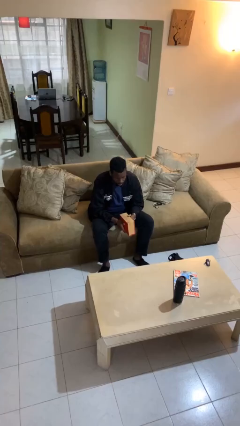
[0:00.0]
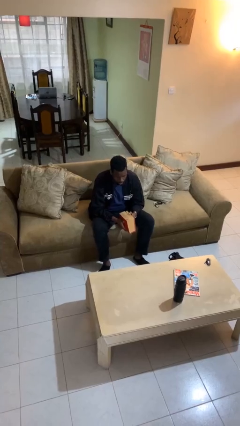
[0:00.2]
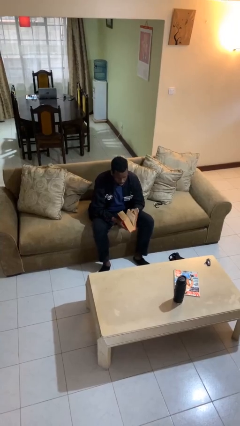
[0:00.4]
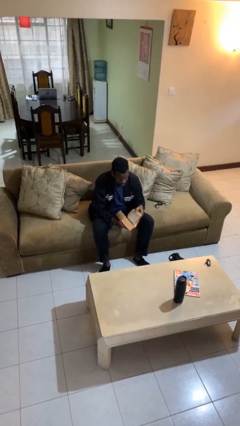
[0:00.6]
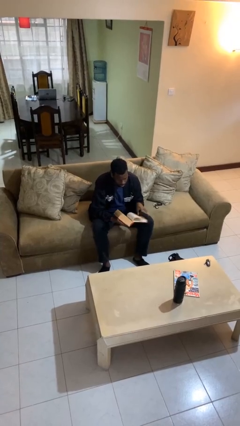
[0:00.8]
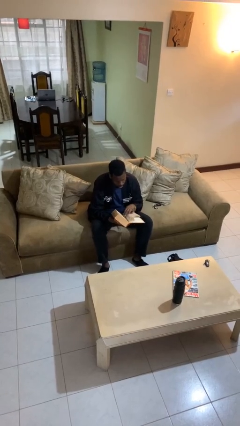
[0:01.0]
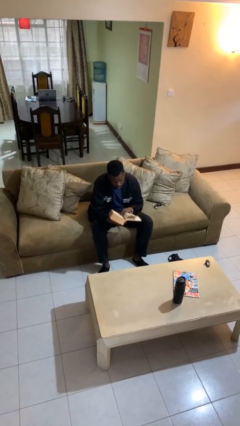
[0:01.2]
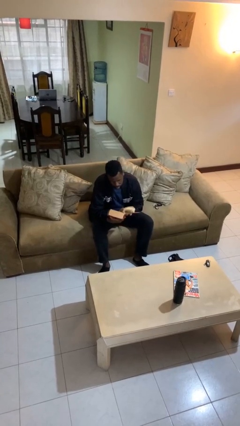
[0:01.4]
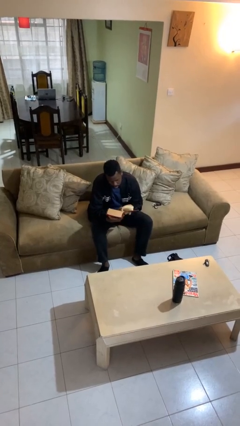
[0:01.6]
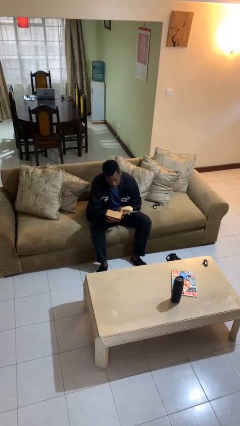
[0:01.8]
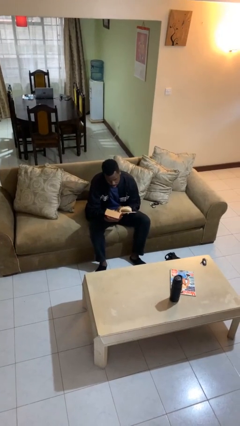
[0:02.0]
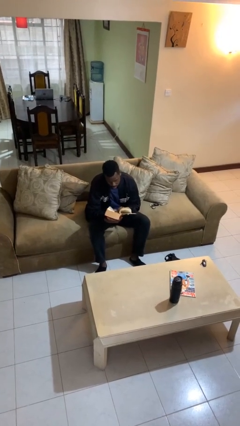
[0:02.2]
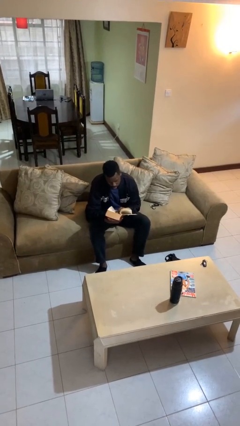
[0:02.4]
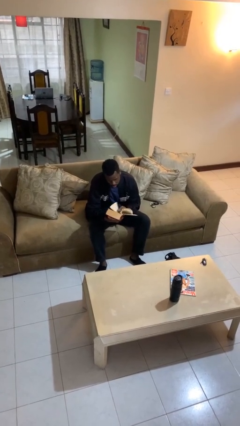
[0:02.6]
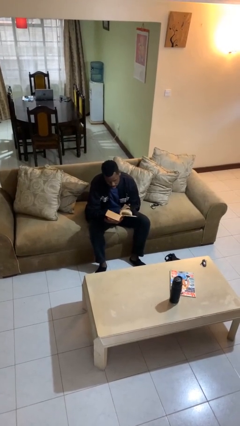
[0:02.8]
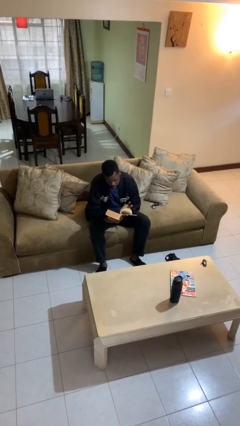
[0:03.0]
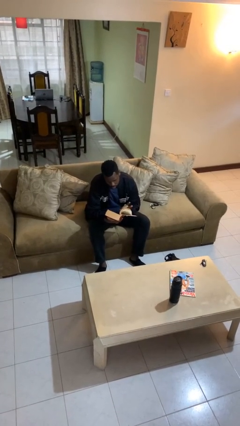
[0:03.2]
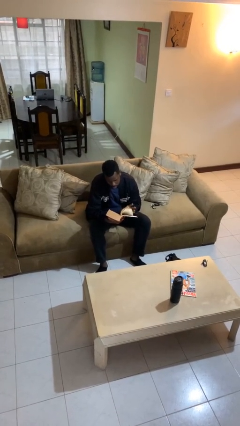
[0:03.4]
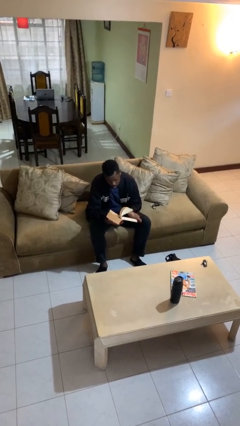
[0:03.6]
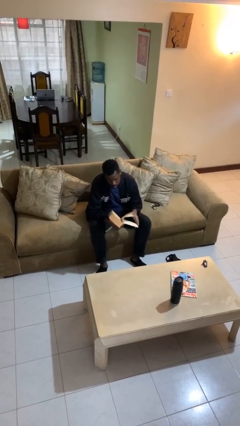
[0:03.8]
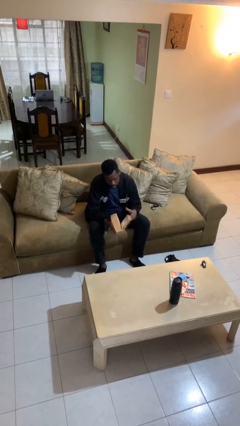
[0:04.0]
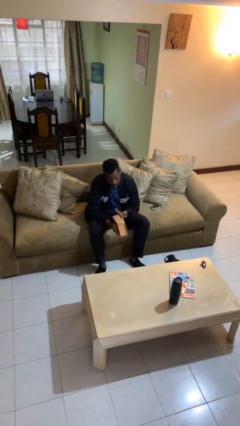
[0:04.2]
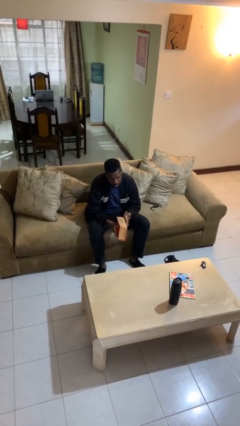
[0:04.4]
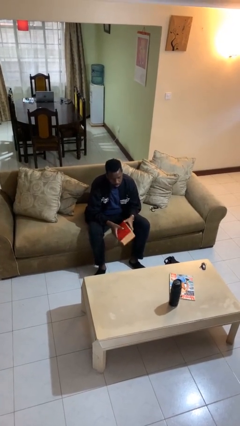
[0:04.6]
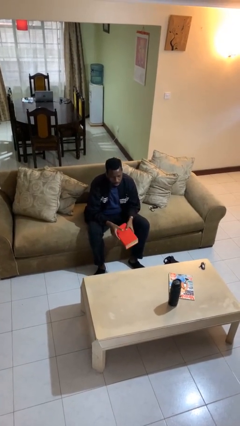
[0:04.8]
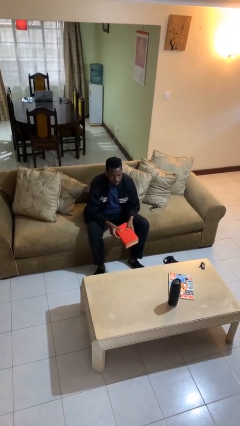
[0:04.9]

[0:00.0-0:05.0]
person reads book

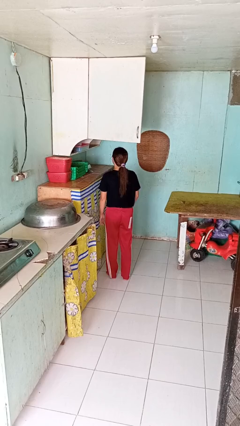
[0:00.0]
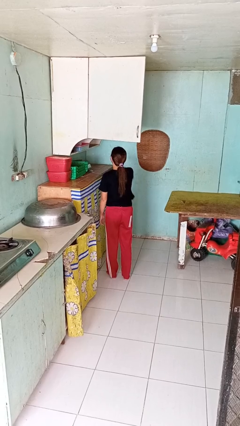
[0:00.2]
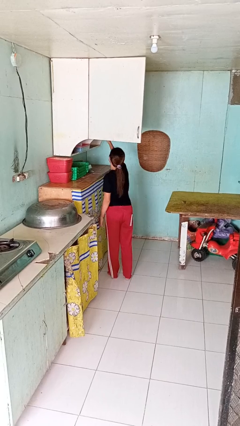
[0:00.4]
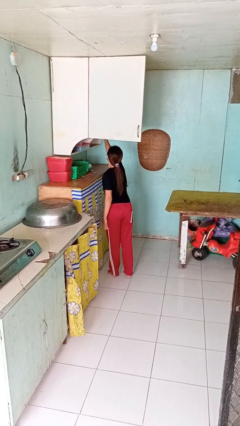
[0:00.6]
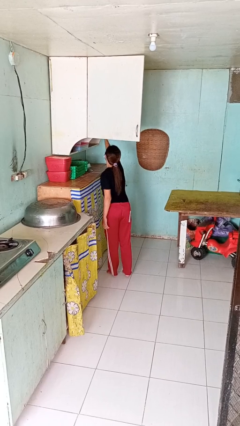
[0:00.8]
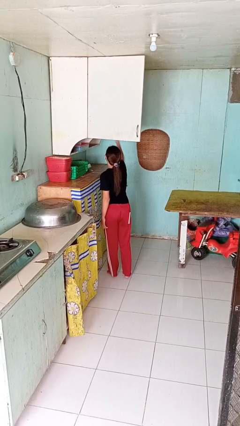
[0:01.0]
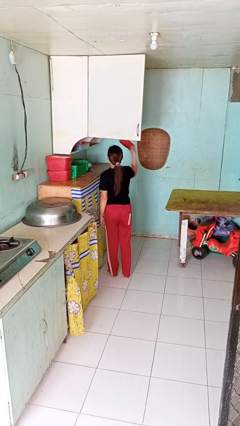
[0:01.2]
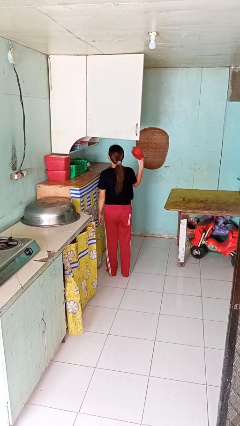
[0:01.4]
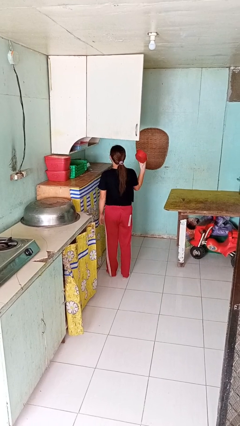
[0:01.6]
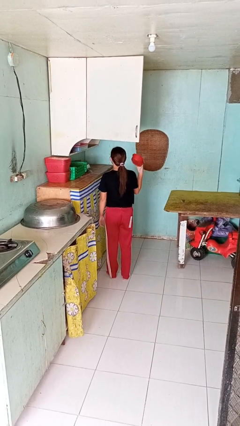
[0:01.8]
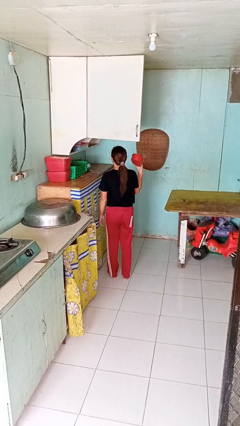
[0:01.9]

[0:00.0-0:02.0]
person takes object from cabinet

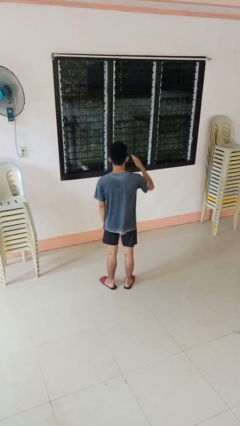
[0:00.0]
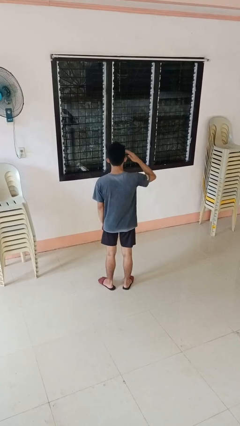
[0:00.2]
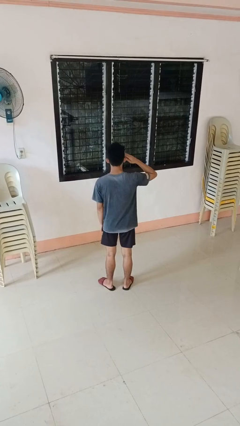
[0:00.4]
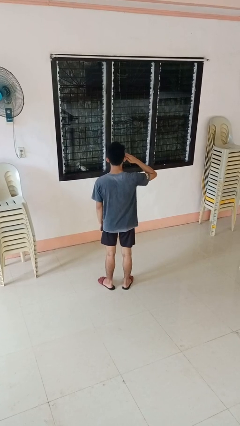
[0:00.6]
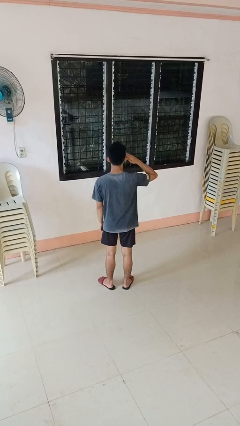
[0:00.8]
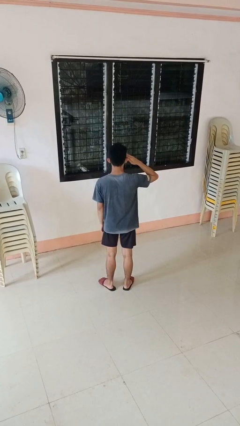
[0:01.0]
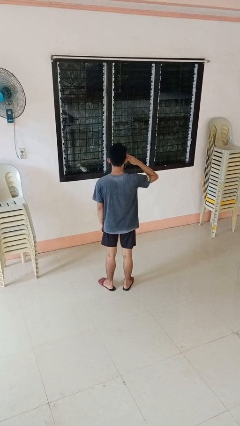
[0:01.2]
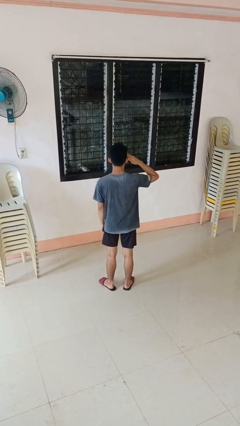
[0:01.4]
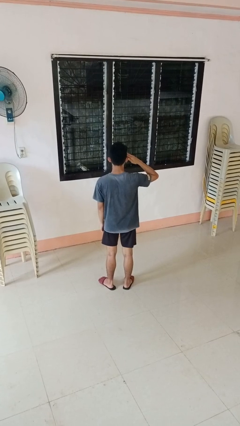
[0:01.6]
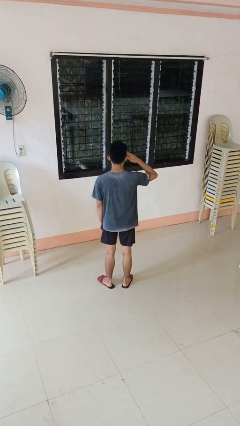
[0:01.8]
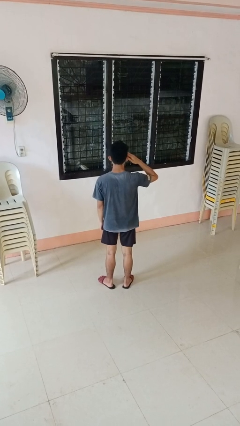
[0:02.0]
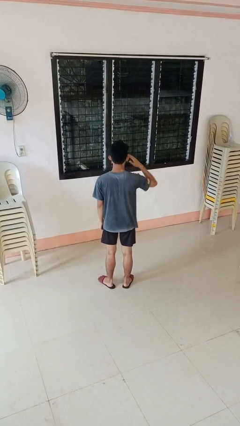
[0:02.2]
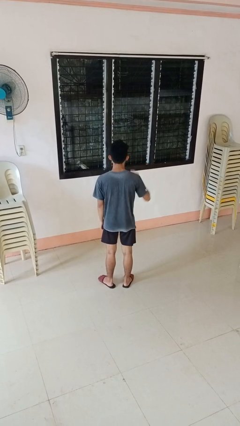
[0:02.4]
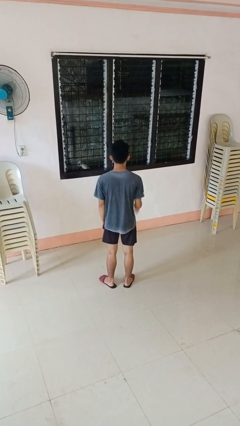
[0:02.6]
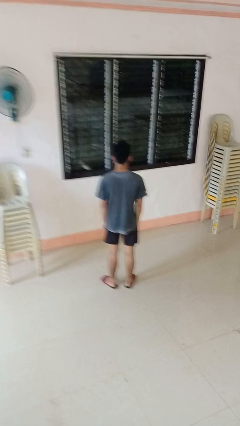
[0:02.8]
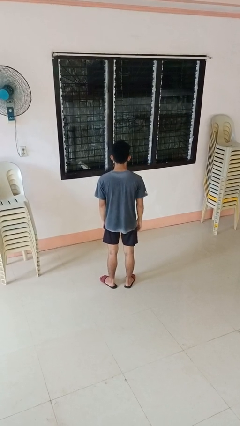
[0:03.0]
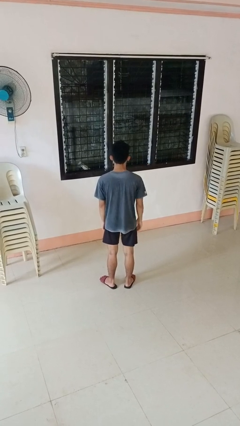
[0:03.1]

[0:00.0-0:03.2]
person salutes

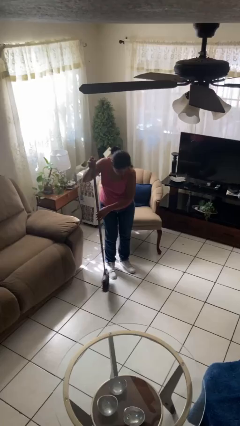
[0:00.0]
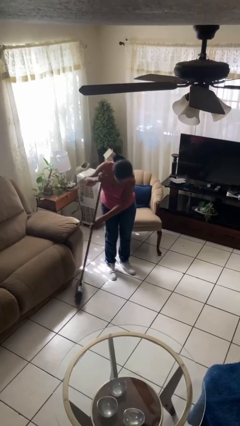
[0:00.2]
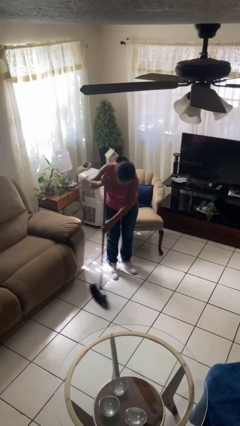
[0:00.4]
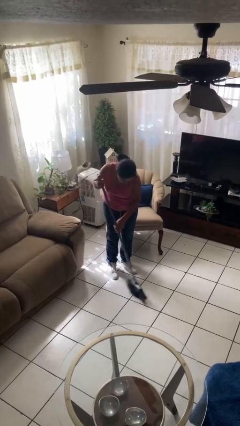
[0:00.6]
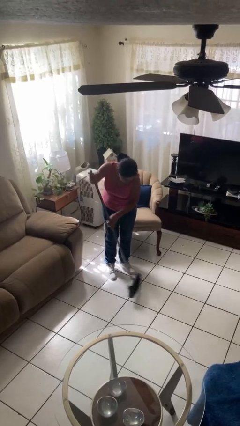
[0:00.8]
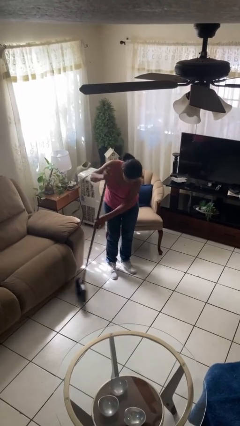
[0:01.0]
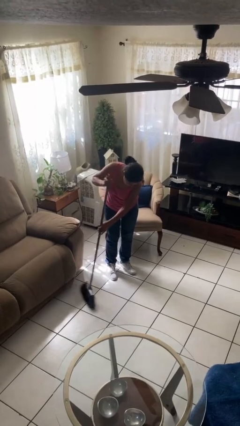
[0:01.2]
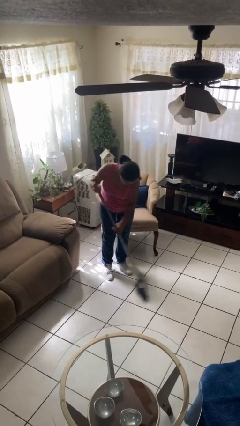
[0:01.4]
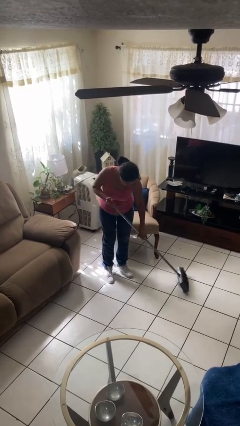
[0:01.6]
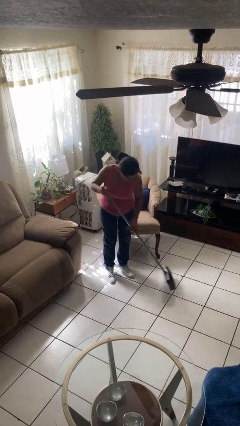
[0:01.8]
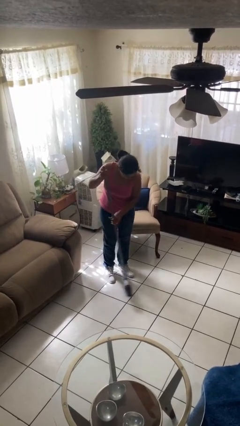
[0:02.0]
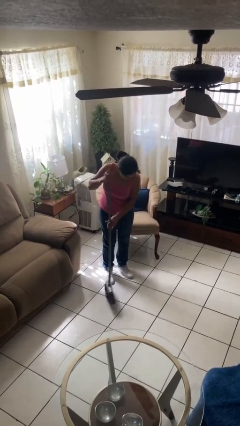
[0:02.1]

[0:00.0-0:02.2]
person sweeps floor

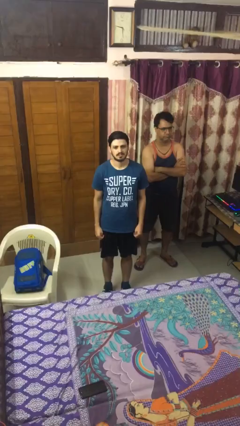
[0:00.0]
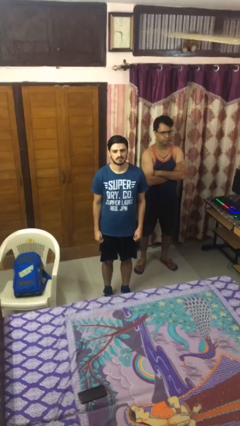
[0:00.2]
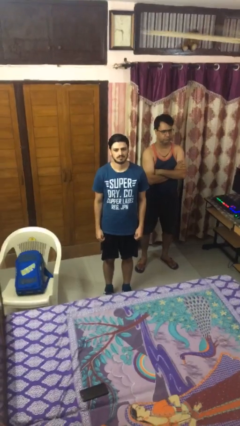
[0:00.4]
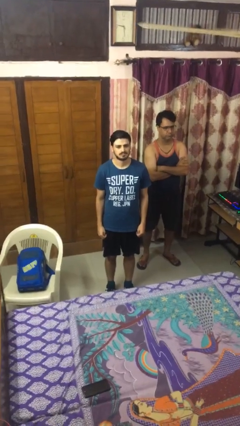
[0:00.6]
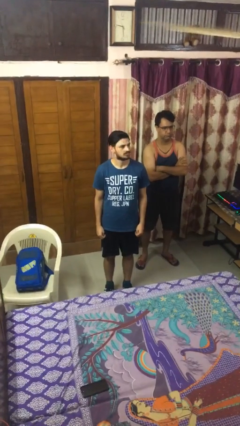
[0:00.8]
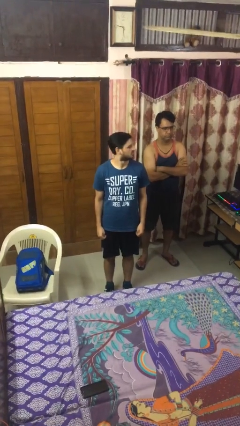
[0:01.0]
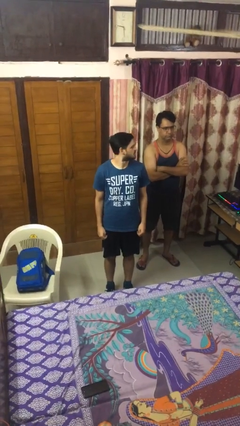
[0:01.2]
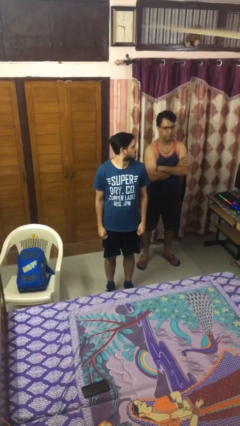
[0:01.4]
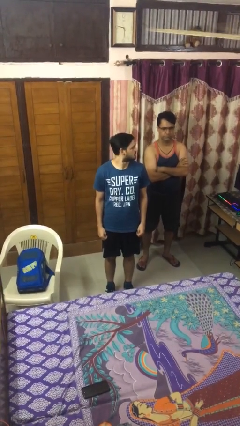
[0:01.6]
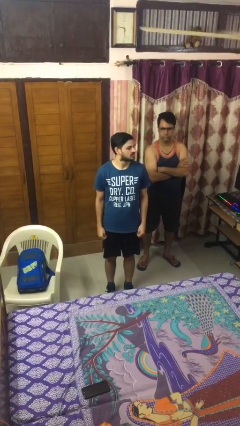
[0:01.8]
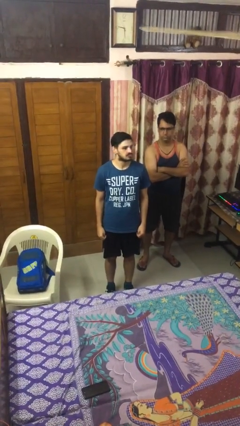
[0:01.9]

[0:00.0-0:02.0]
person looks over shoulder

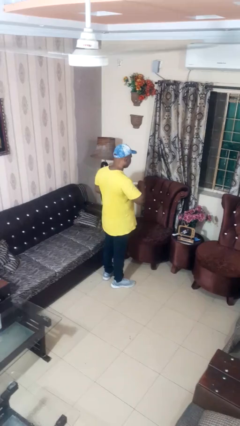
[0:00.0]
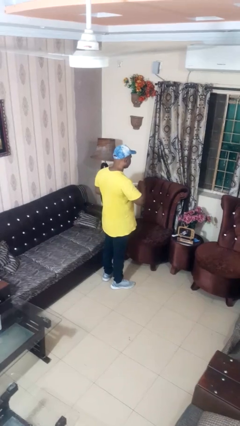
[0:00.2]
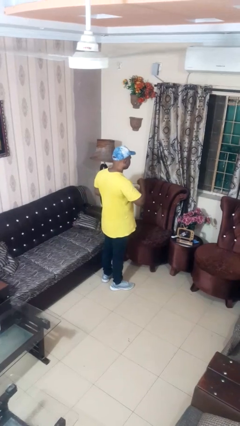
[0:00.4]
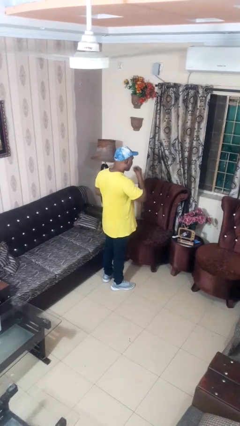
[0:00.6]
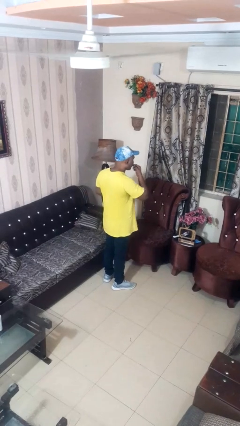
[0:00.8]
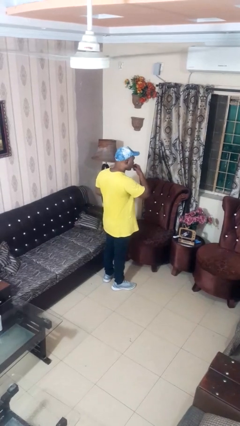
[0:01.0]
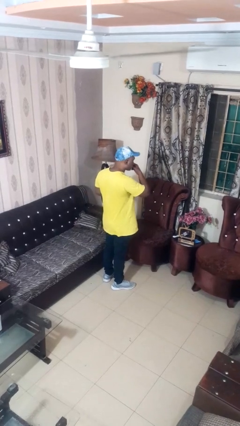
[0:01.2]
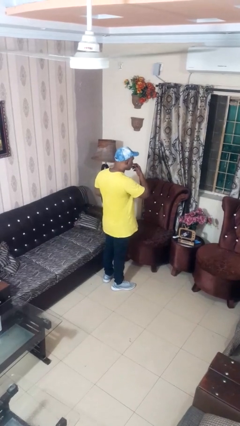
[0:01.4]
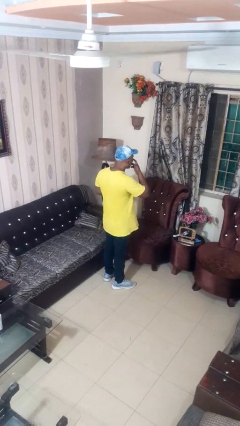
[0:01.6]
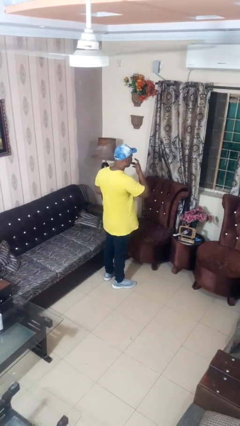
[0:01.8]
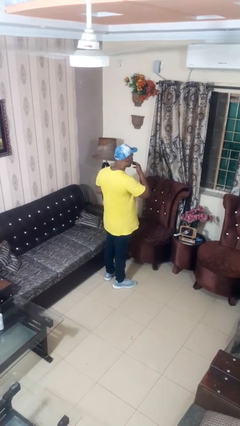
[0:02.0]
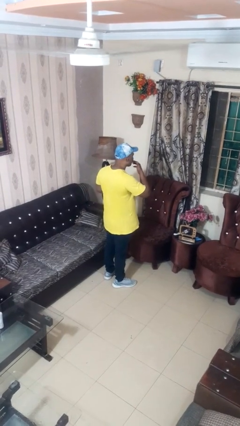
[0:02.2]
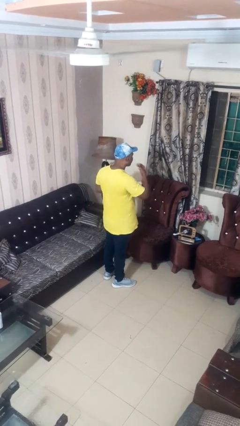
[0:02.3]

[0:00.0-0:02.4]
person licks fingers

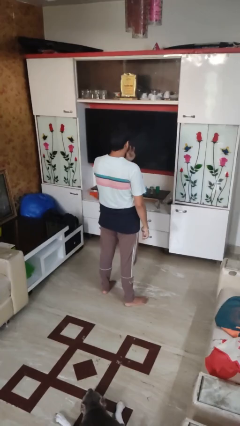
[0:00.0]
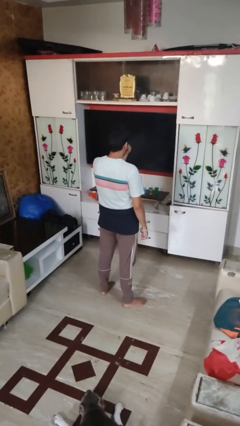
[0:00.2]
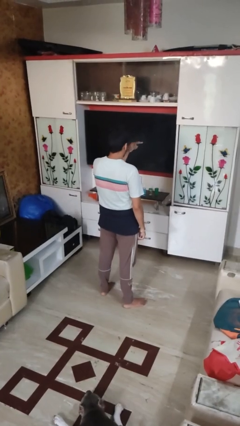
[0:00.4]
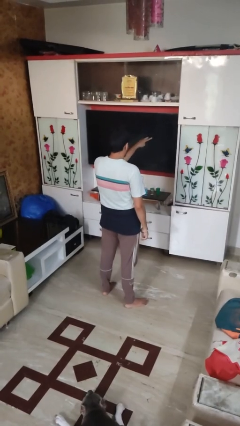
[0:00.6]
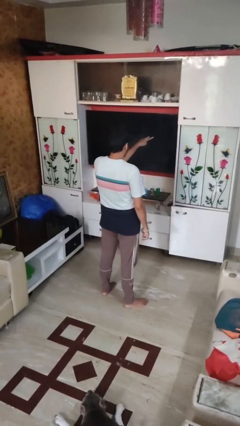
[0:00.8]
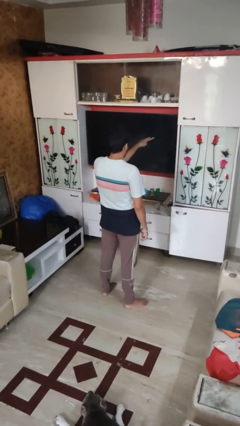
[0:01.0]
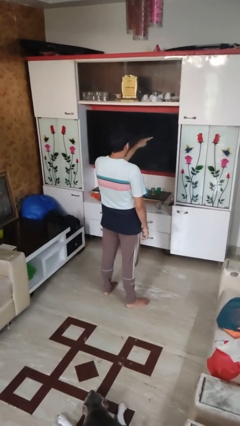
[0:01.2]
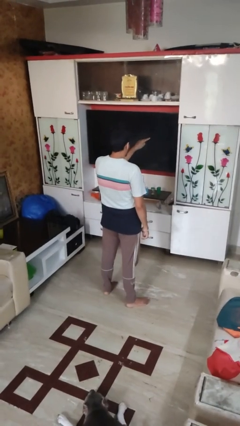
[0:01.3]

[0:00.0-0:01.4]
person gestures watch closely
